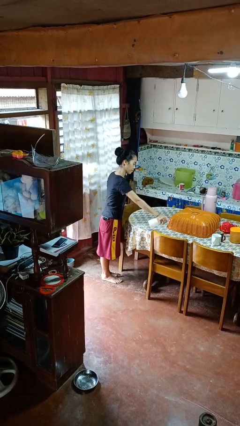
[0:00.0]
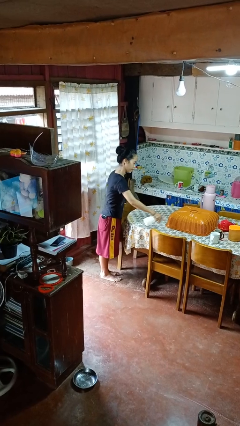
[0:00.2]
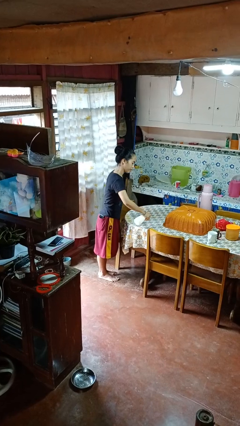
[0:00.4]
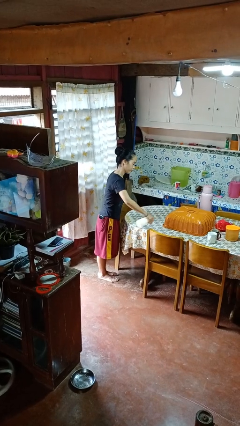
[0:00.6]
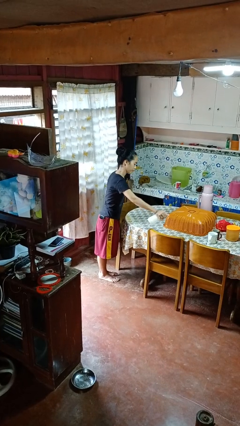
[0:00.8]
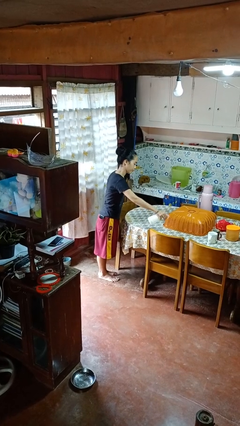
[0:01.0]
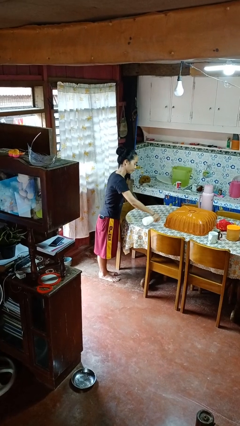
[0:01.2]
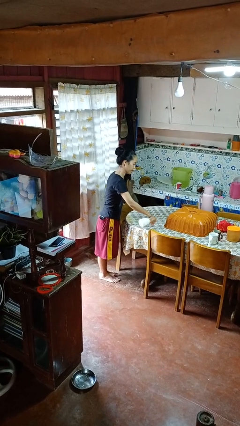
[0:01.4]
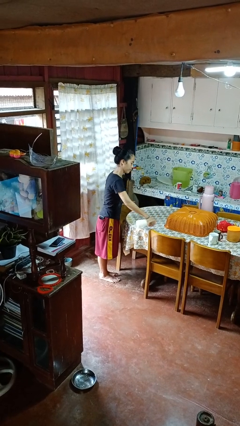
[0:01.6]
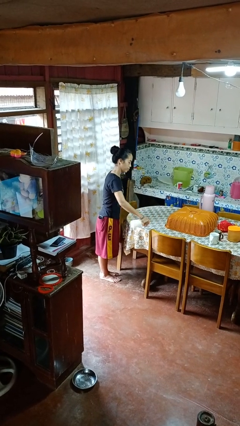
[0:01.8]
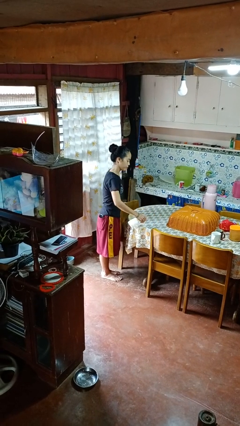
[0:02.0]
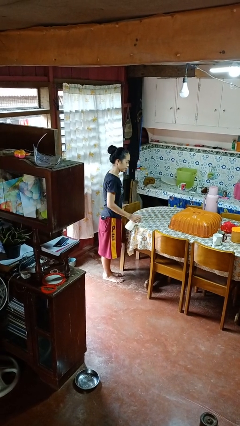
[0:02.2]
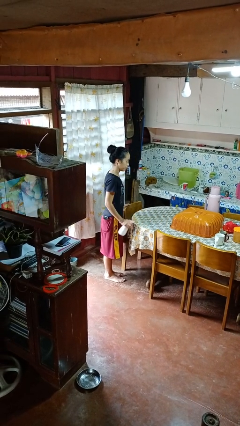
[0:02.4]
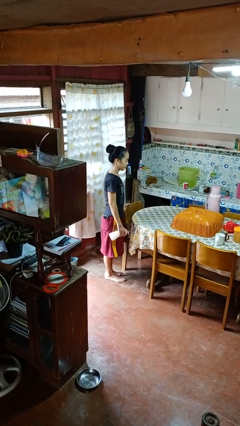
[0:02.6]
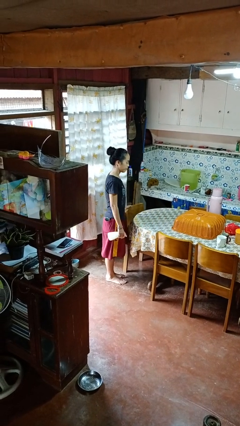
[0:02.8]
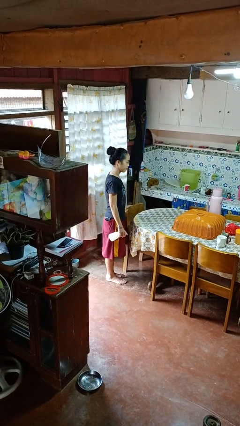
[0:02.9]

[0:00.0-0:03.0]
person sprays from bottle

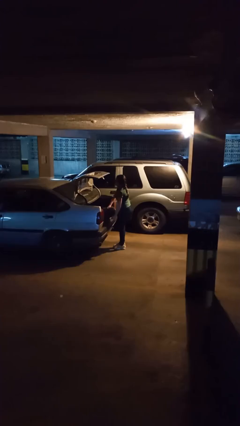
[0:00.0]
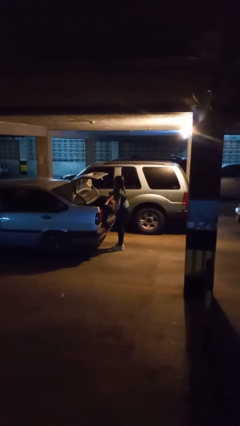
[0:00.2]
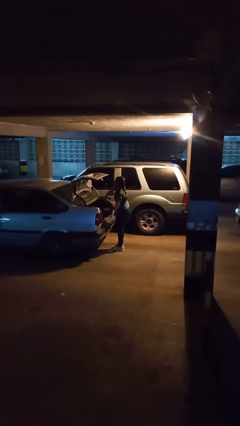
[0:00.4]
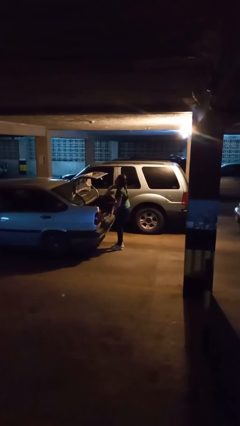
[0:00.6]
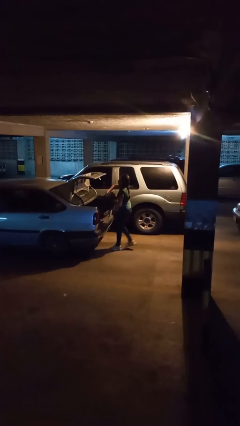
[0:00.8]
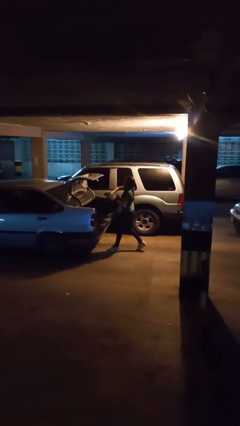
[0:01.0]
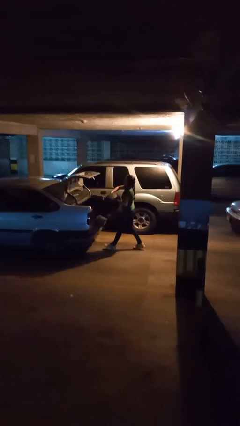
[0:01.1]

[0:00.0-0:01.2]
person unloads car

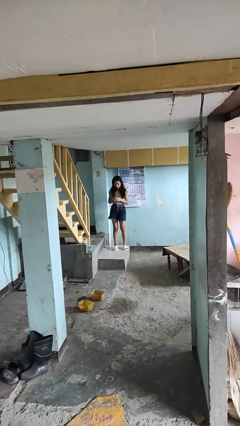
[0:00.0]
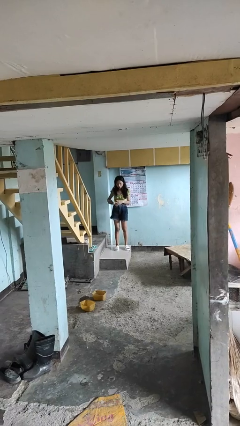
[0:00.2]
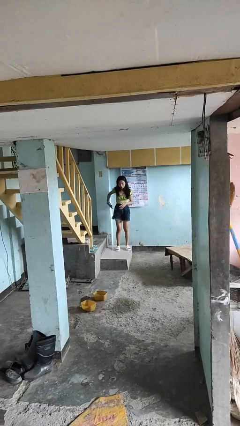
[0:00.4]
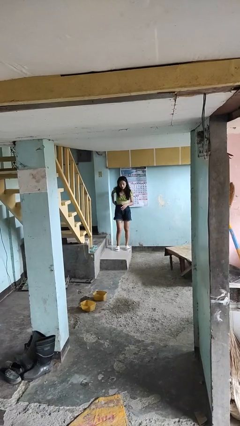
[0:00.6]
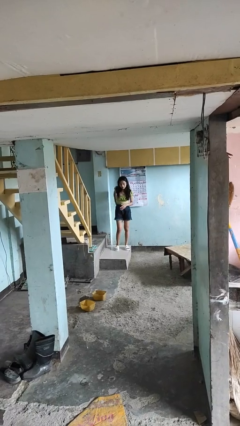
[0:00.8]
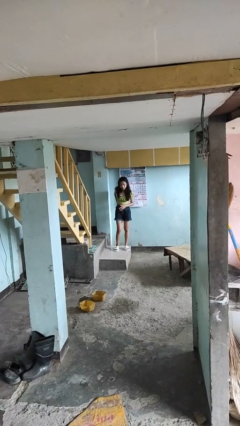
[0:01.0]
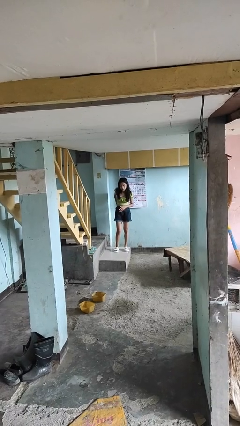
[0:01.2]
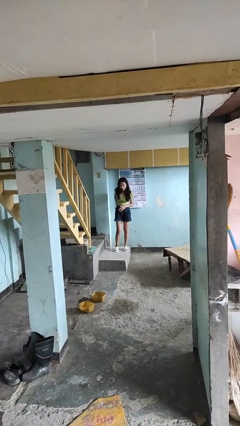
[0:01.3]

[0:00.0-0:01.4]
person puts phone into pocket

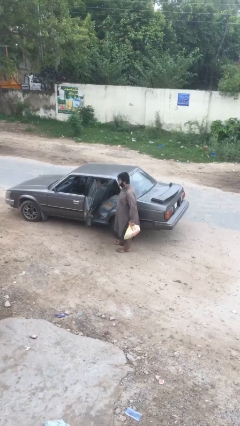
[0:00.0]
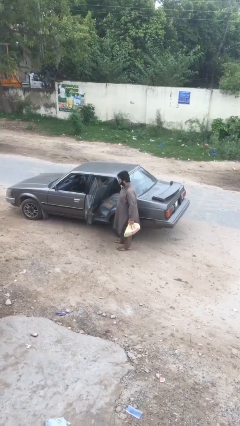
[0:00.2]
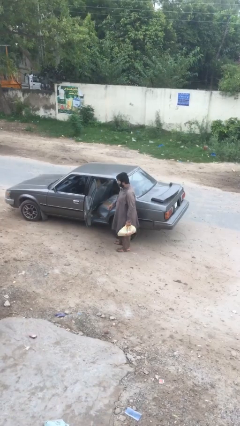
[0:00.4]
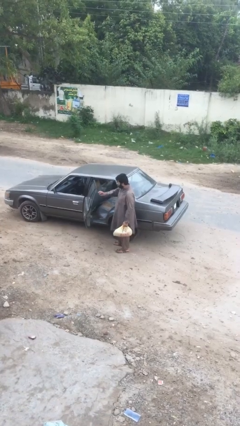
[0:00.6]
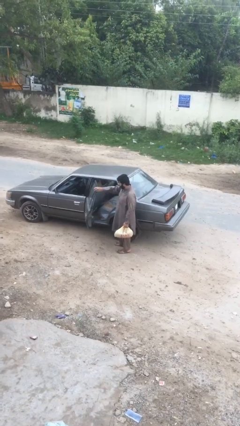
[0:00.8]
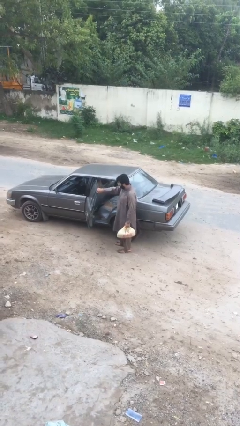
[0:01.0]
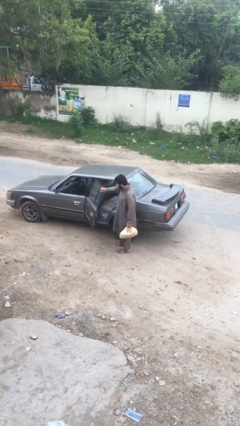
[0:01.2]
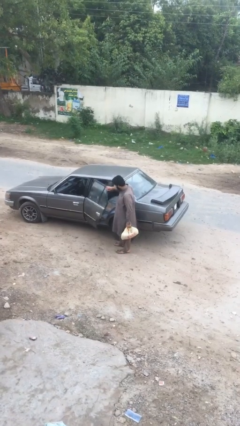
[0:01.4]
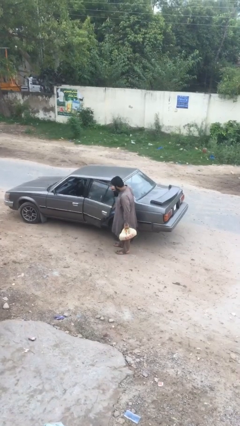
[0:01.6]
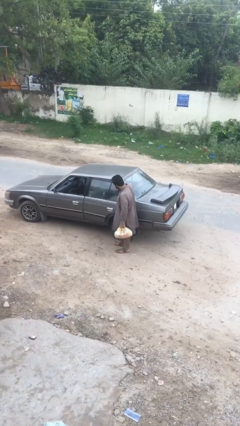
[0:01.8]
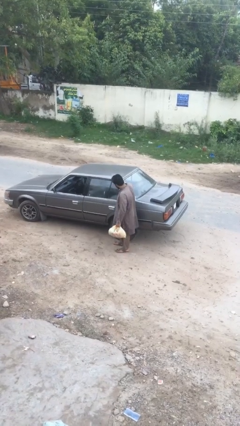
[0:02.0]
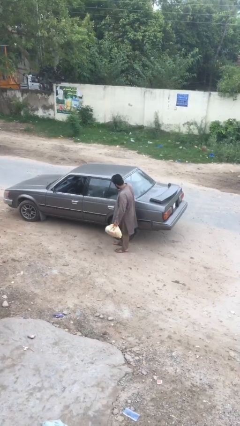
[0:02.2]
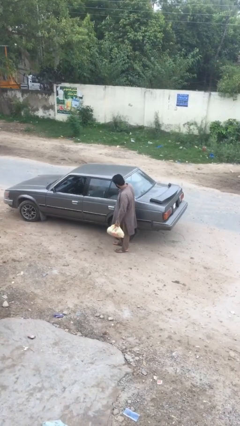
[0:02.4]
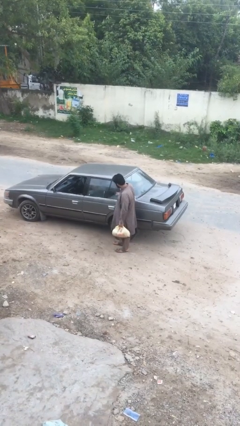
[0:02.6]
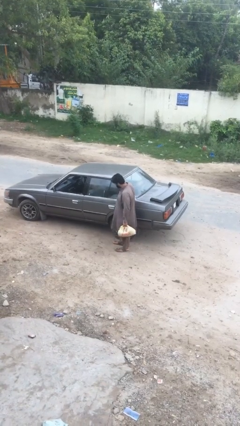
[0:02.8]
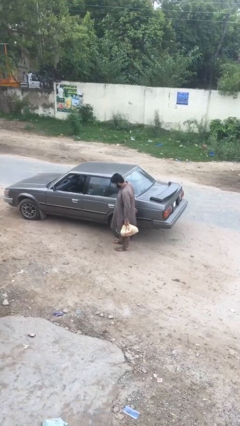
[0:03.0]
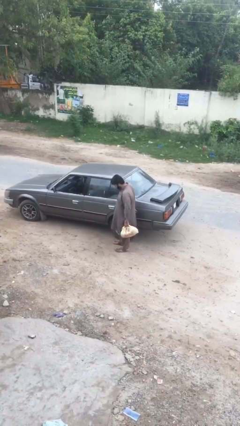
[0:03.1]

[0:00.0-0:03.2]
person closes car door

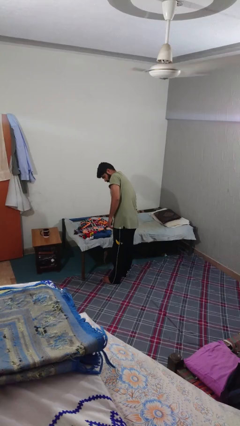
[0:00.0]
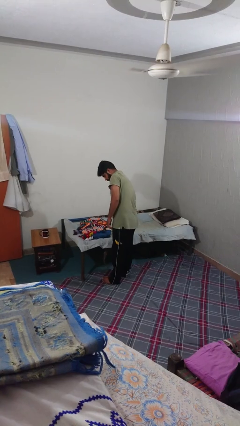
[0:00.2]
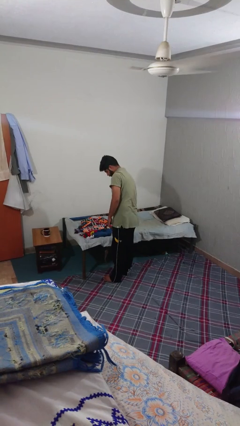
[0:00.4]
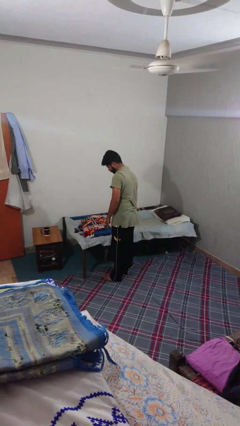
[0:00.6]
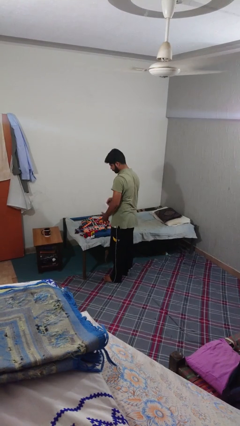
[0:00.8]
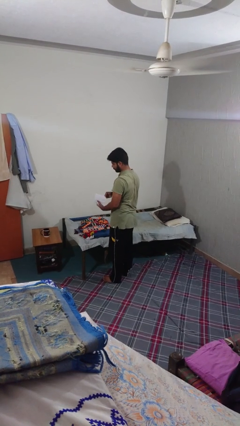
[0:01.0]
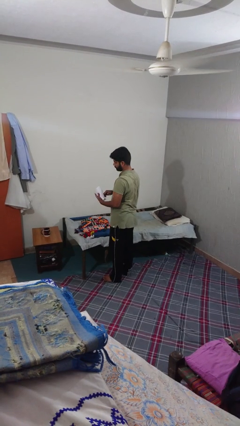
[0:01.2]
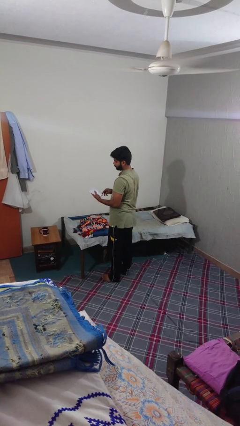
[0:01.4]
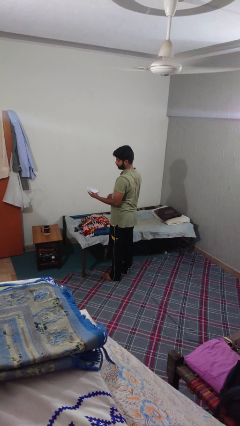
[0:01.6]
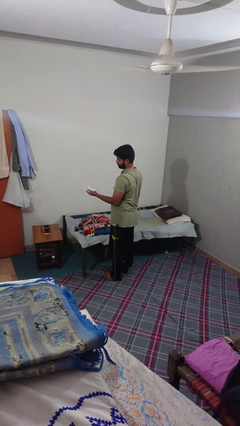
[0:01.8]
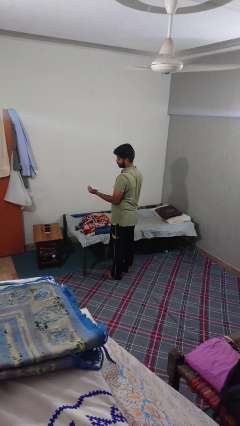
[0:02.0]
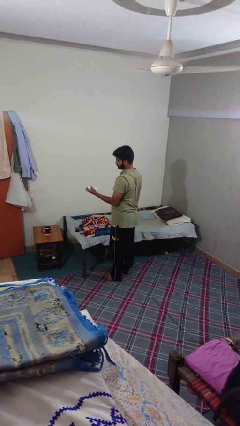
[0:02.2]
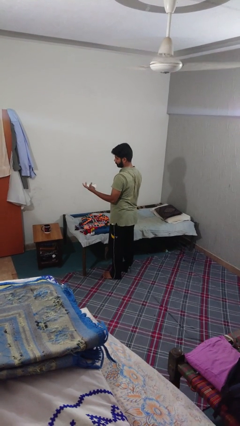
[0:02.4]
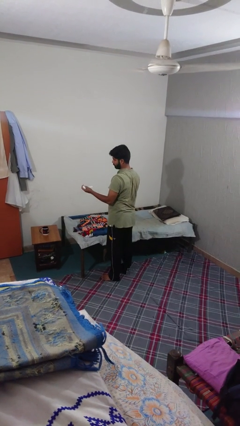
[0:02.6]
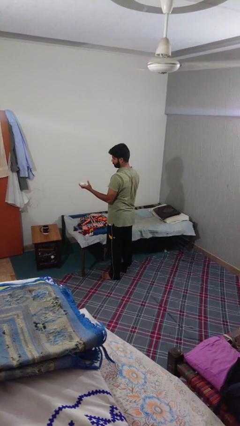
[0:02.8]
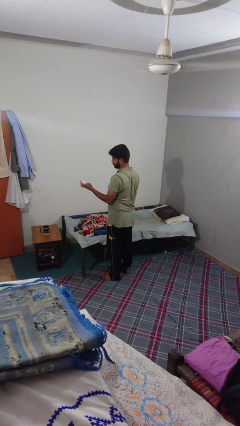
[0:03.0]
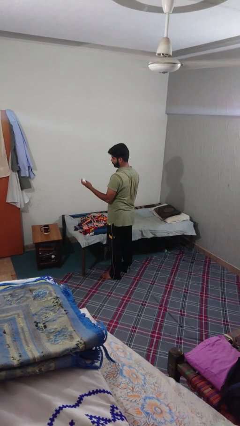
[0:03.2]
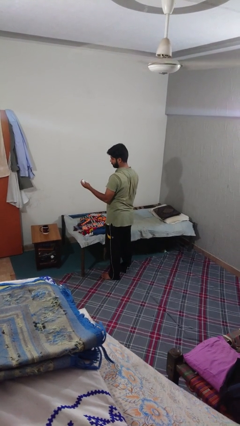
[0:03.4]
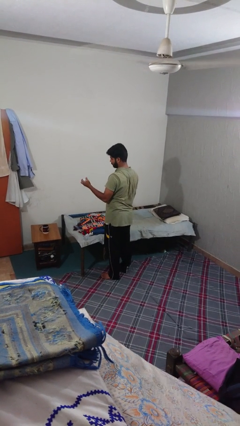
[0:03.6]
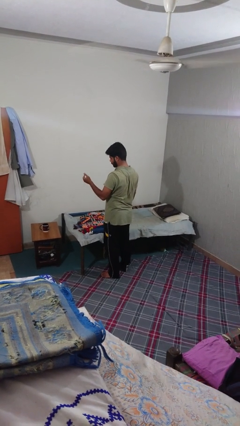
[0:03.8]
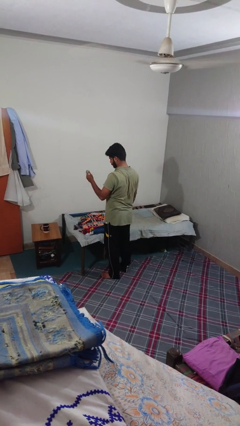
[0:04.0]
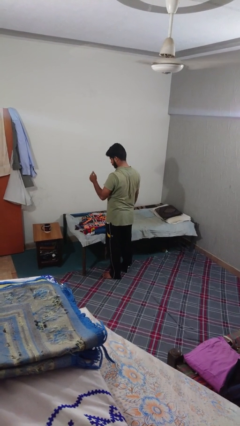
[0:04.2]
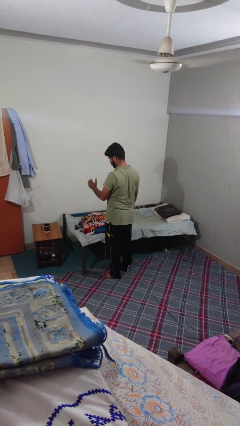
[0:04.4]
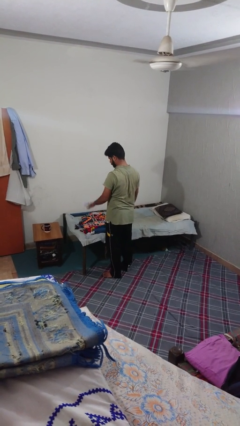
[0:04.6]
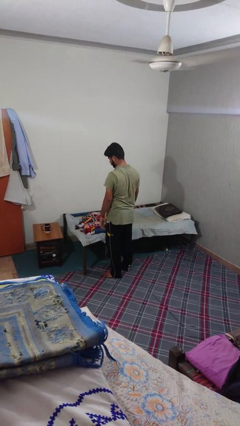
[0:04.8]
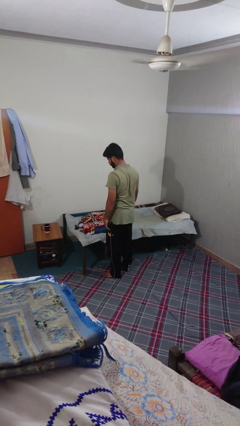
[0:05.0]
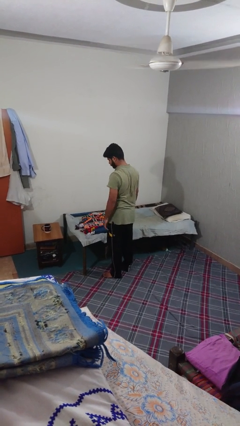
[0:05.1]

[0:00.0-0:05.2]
person crumples paper

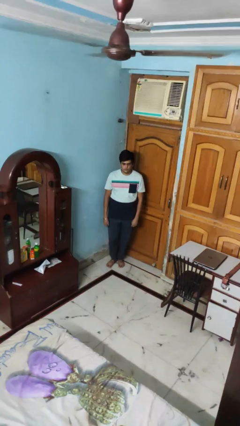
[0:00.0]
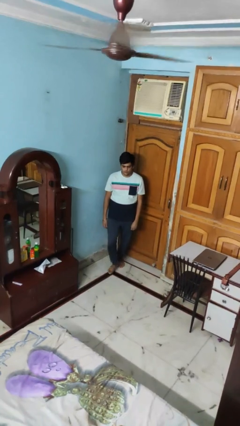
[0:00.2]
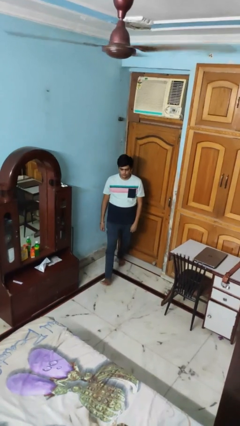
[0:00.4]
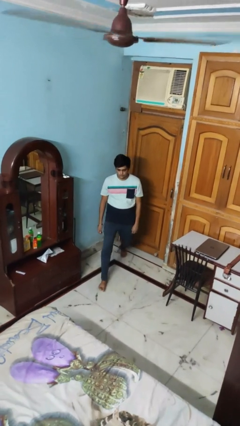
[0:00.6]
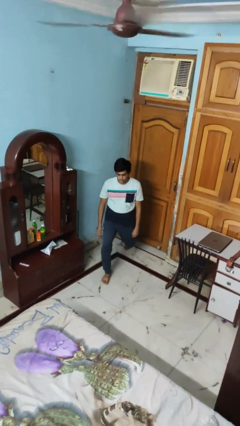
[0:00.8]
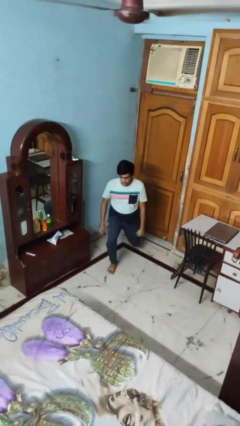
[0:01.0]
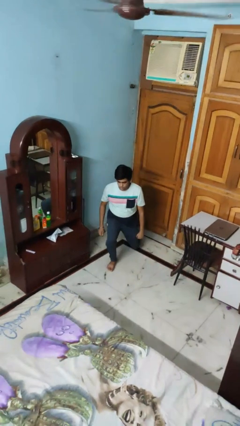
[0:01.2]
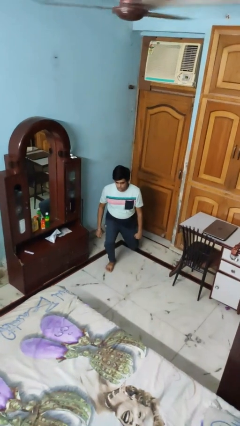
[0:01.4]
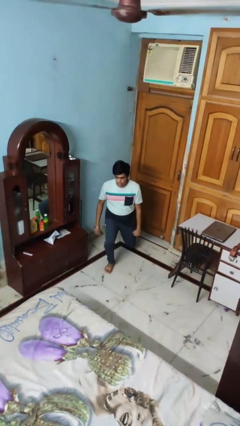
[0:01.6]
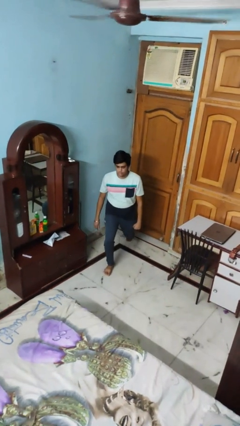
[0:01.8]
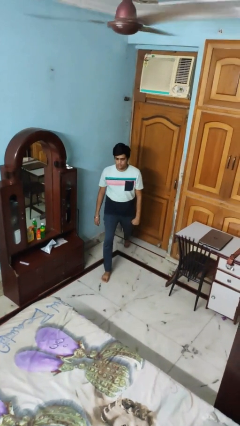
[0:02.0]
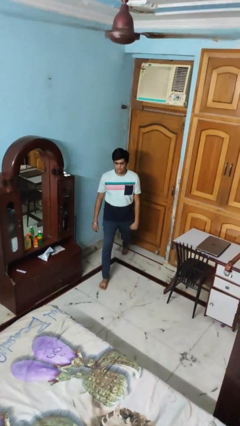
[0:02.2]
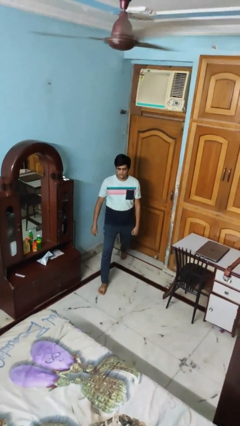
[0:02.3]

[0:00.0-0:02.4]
person exercises with lunges

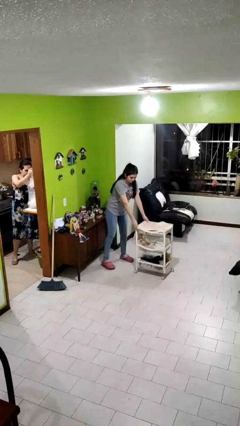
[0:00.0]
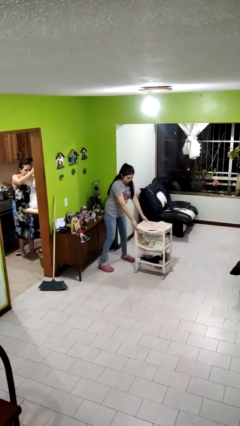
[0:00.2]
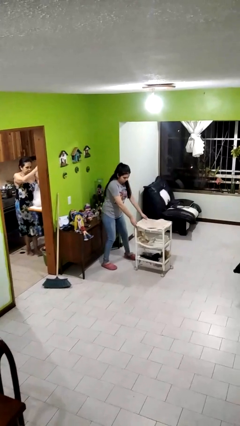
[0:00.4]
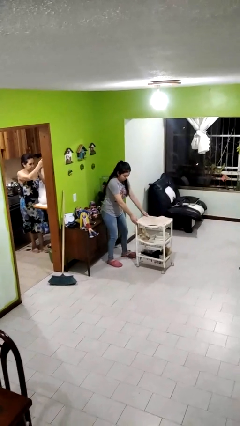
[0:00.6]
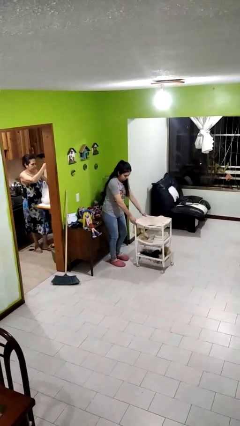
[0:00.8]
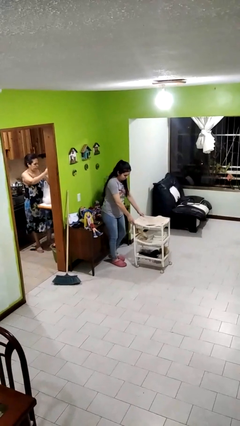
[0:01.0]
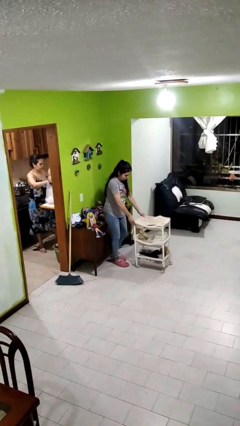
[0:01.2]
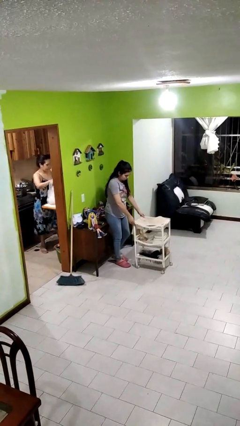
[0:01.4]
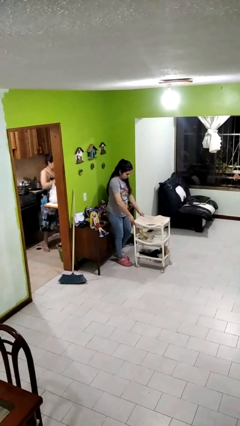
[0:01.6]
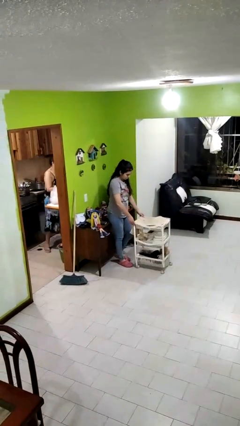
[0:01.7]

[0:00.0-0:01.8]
person pulls wheeled cart
